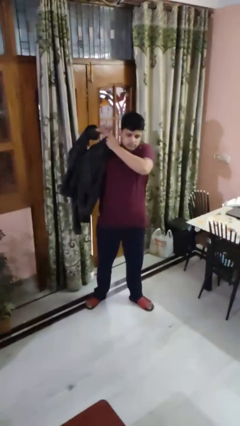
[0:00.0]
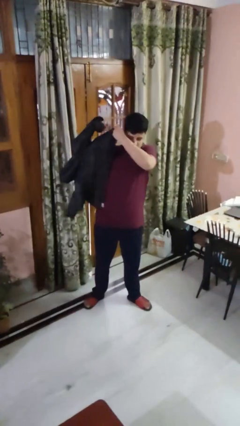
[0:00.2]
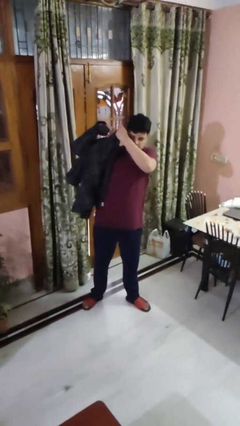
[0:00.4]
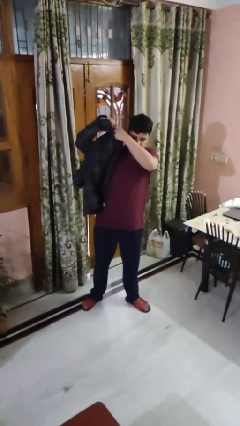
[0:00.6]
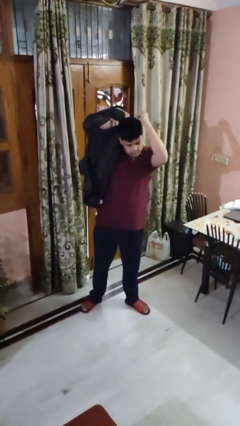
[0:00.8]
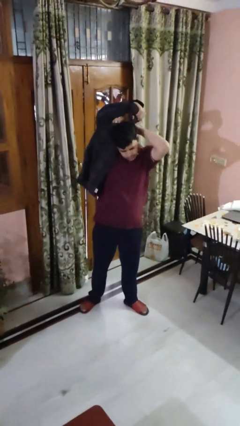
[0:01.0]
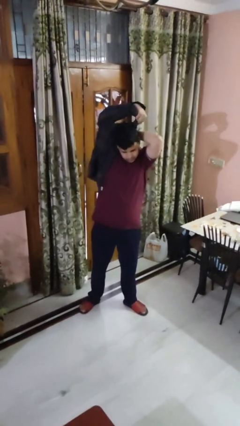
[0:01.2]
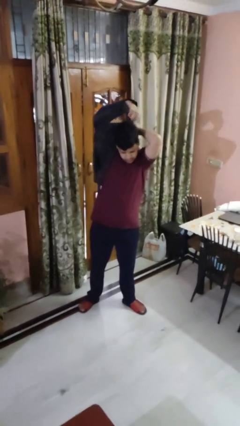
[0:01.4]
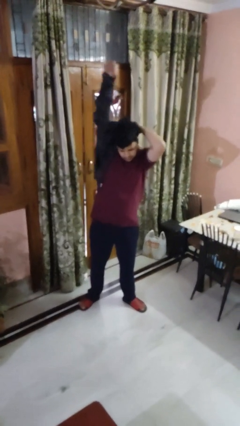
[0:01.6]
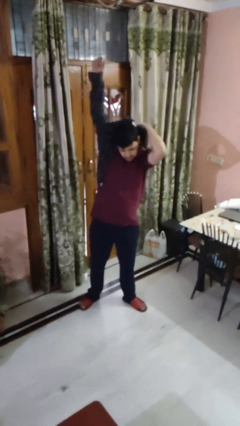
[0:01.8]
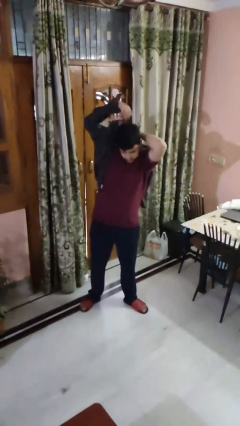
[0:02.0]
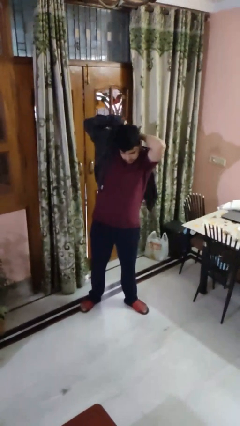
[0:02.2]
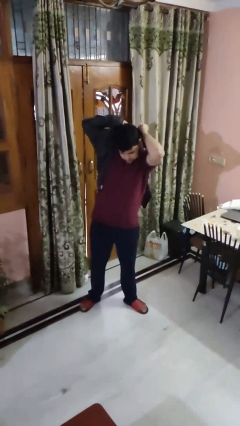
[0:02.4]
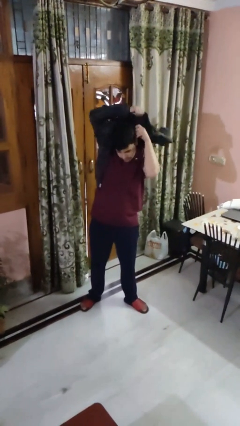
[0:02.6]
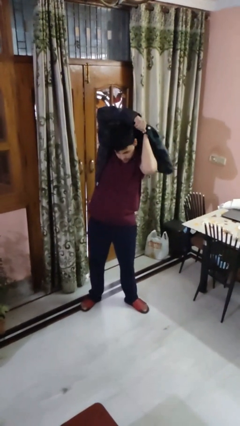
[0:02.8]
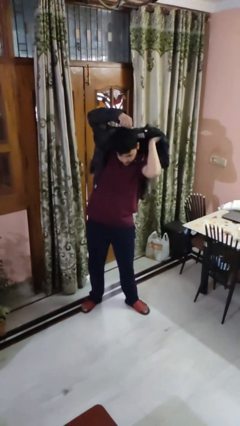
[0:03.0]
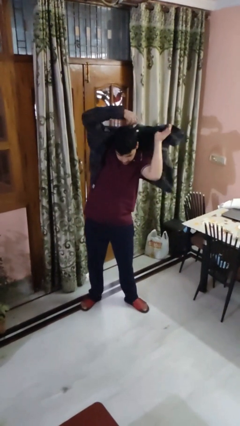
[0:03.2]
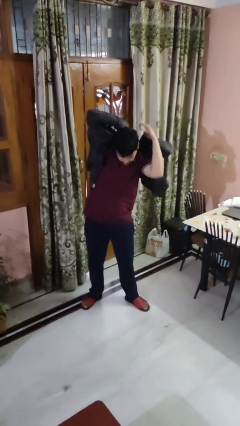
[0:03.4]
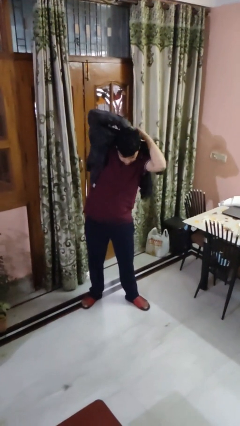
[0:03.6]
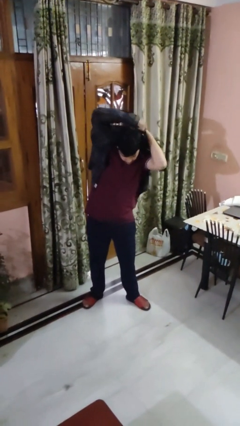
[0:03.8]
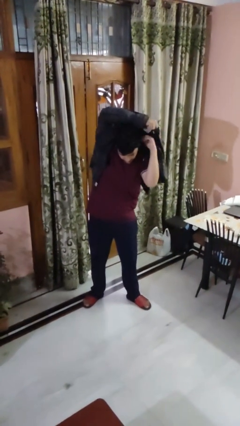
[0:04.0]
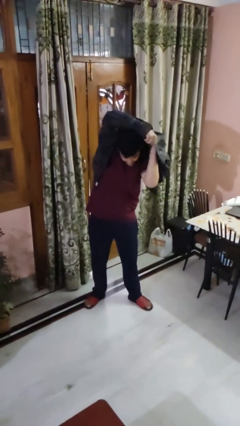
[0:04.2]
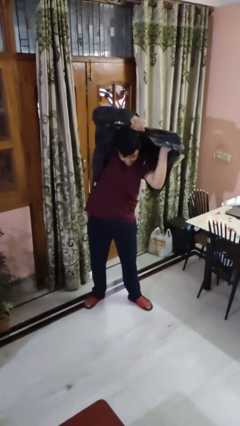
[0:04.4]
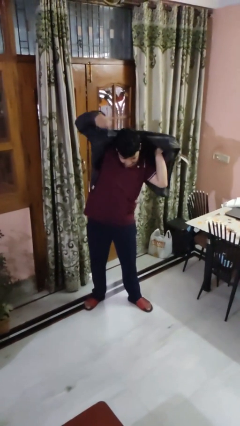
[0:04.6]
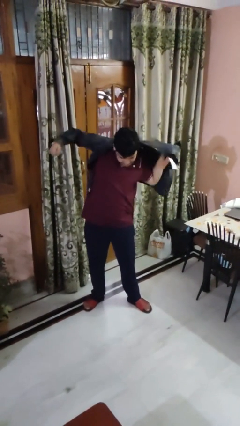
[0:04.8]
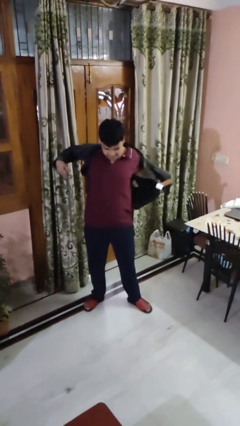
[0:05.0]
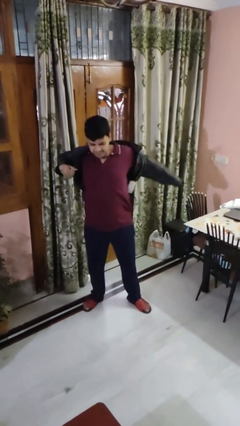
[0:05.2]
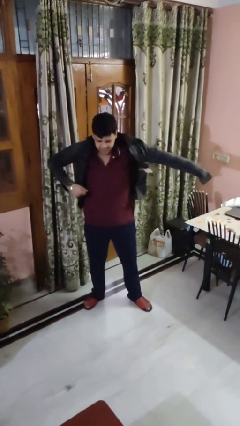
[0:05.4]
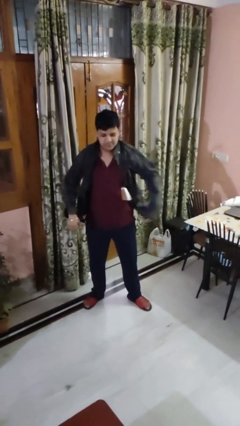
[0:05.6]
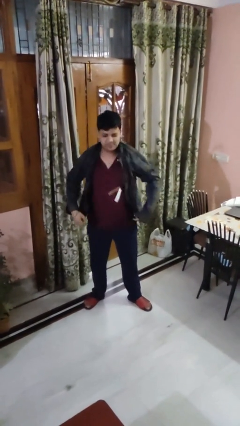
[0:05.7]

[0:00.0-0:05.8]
person puts on shirt

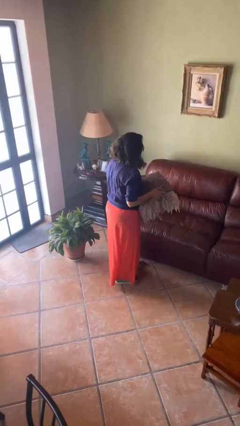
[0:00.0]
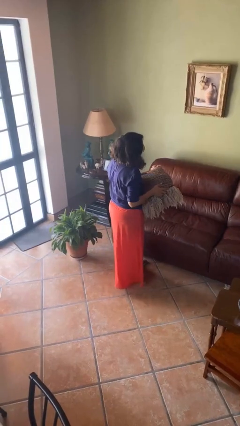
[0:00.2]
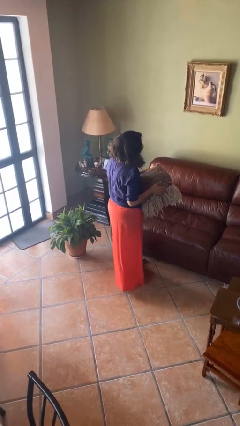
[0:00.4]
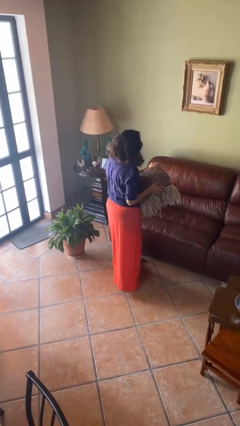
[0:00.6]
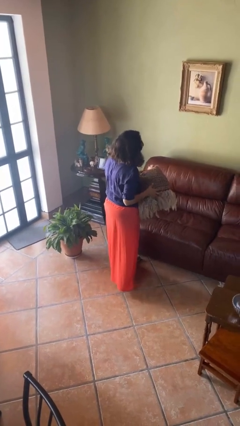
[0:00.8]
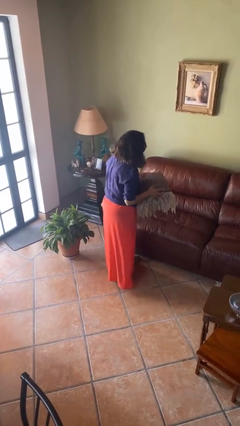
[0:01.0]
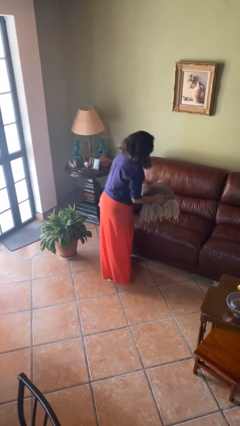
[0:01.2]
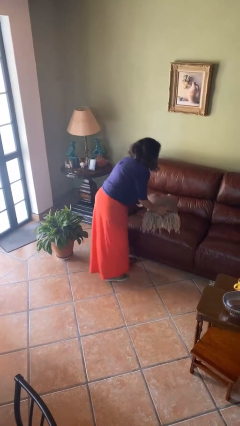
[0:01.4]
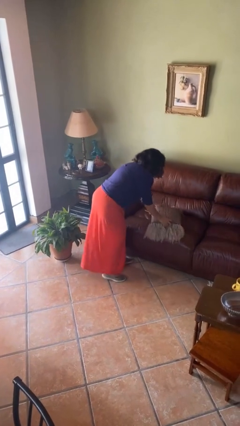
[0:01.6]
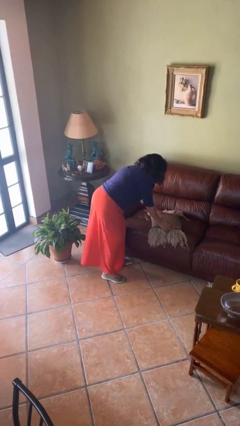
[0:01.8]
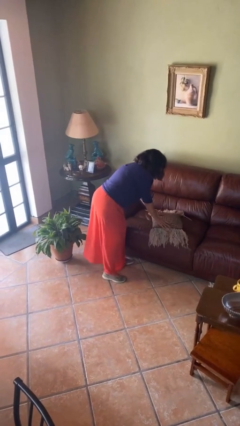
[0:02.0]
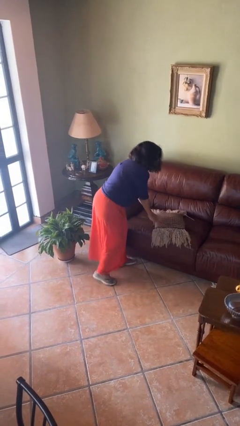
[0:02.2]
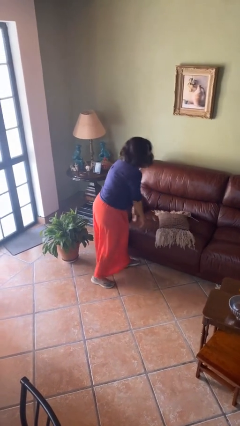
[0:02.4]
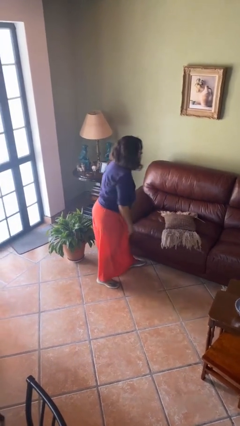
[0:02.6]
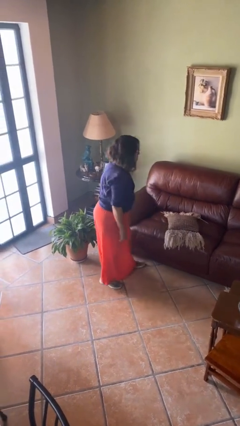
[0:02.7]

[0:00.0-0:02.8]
person puts down object on couch

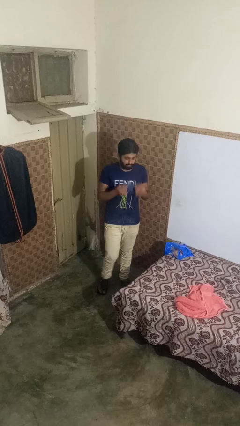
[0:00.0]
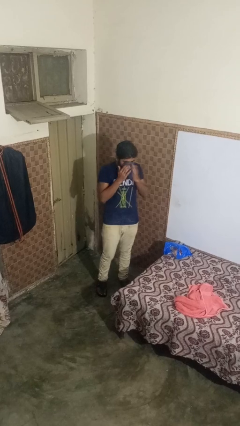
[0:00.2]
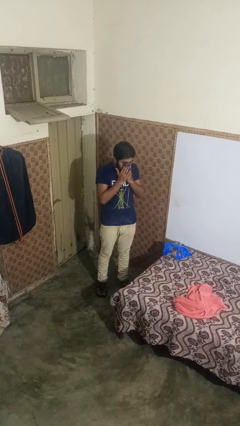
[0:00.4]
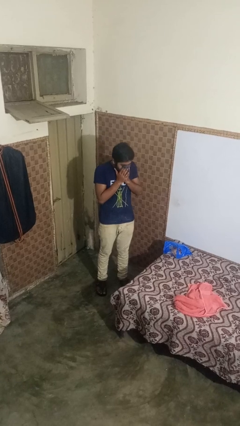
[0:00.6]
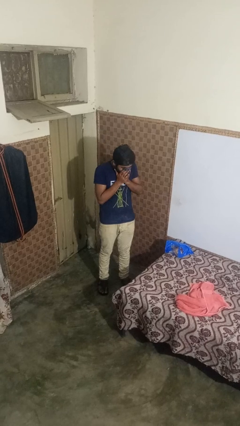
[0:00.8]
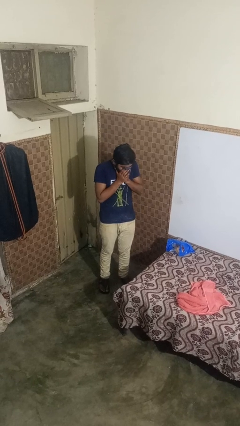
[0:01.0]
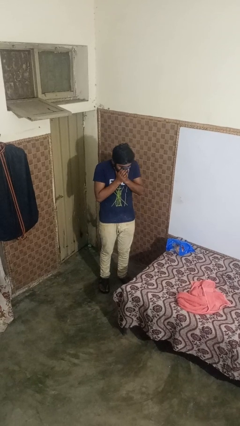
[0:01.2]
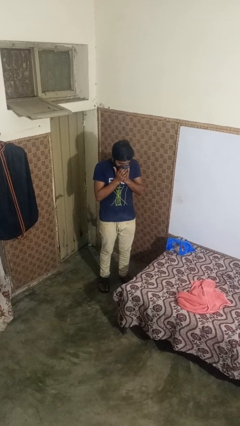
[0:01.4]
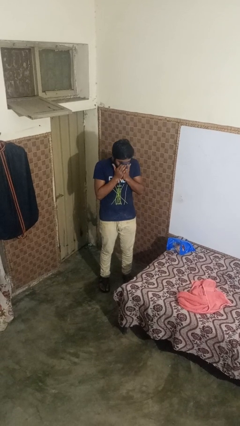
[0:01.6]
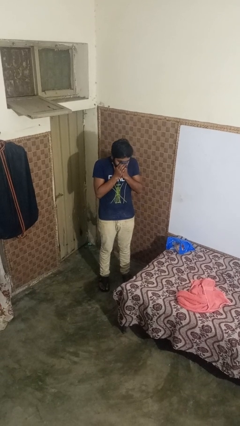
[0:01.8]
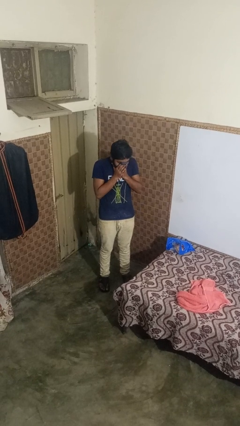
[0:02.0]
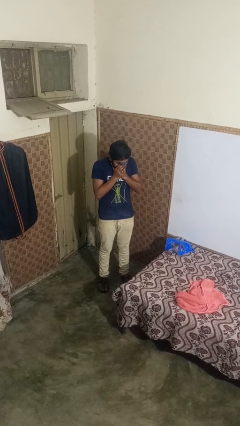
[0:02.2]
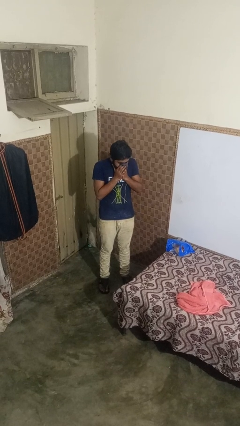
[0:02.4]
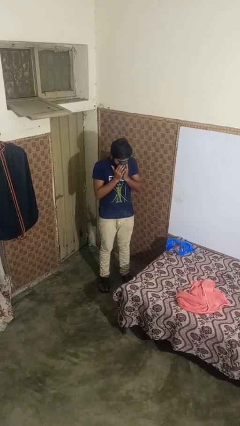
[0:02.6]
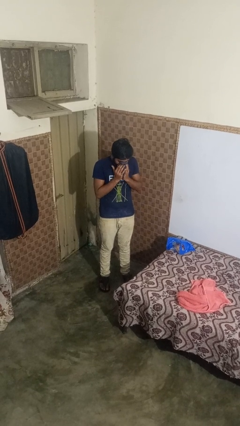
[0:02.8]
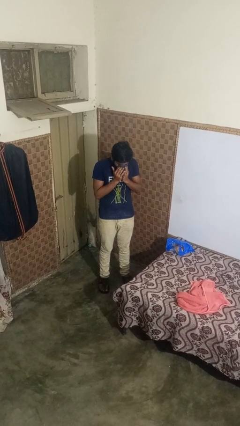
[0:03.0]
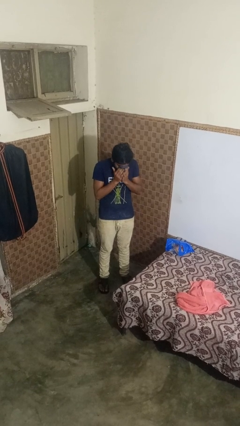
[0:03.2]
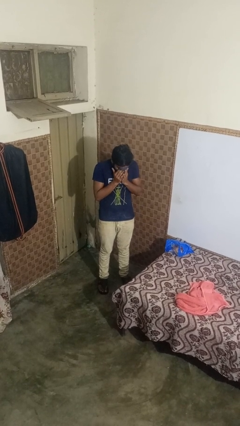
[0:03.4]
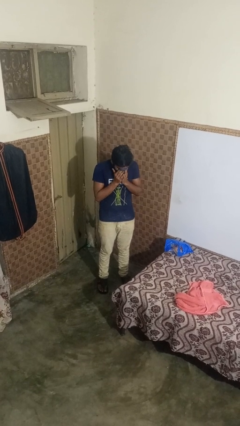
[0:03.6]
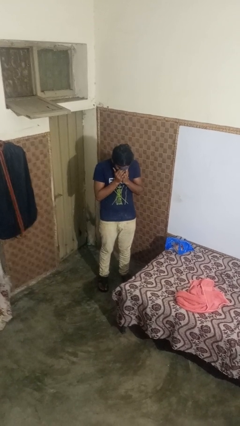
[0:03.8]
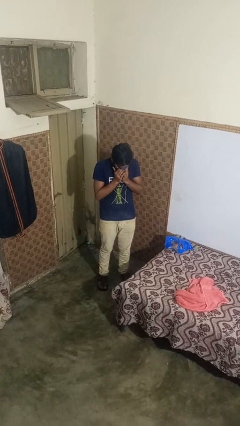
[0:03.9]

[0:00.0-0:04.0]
person blows nose

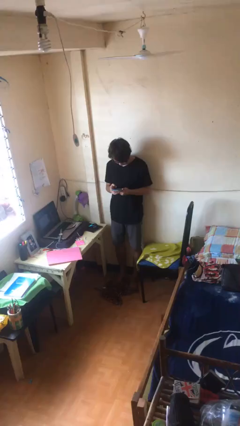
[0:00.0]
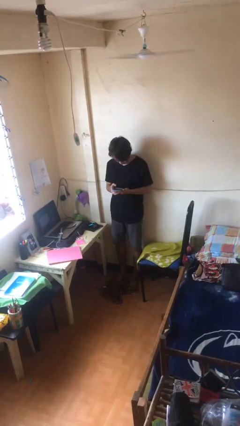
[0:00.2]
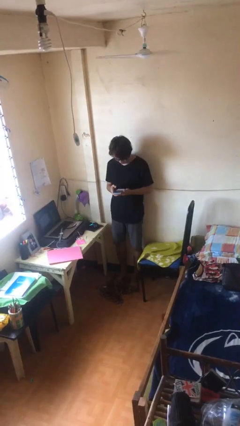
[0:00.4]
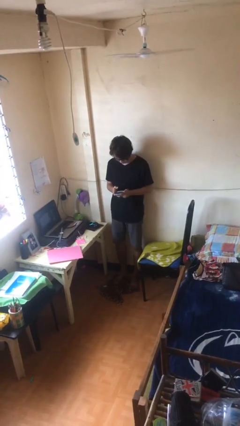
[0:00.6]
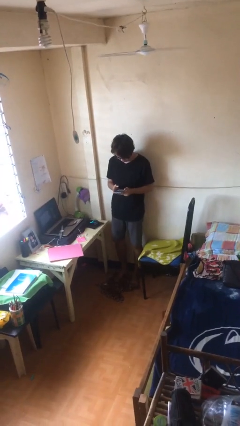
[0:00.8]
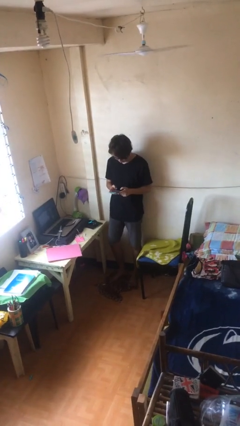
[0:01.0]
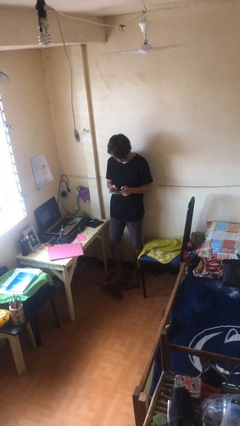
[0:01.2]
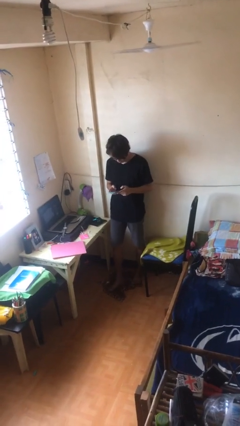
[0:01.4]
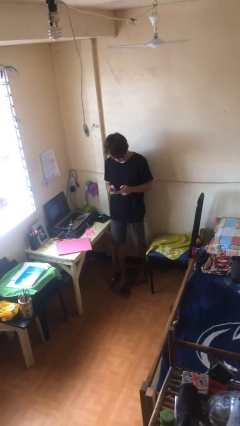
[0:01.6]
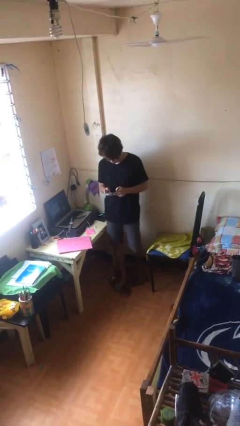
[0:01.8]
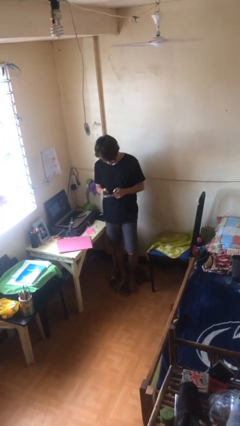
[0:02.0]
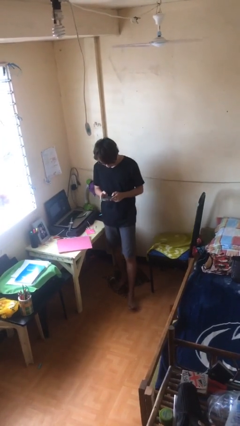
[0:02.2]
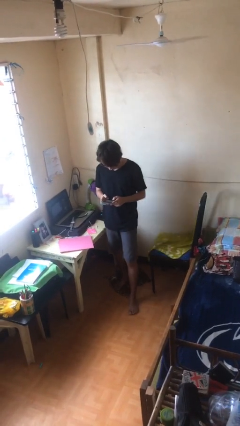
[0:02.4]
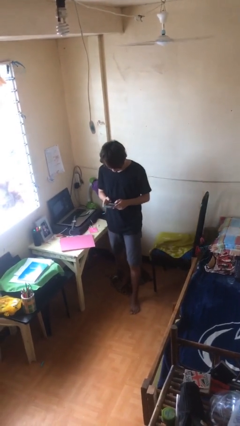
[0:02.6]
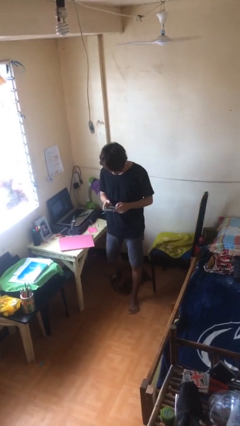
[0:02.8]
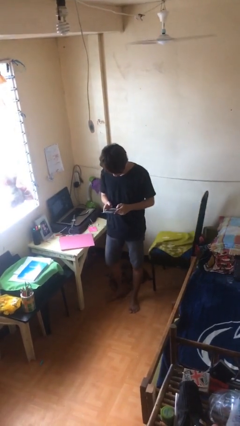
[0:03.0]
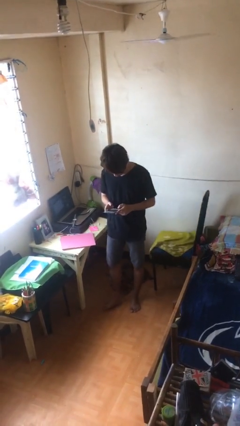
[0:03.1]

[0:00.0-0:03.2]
person texts on phone

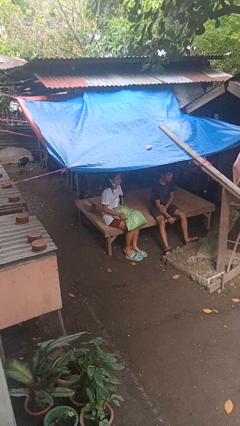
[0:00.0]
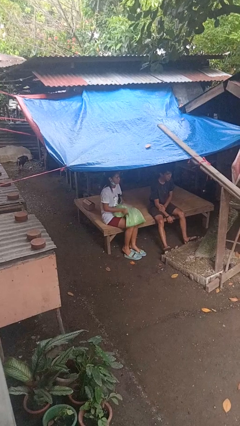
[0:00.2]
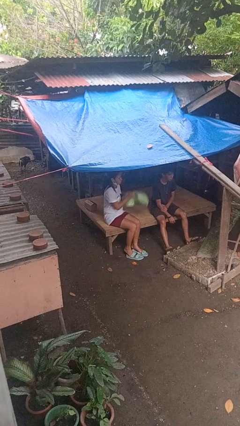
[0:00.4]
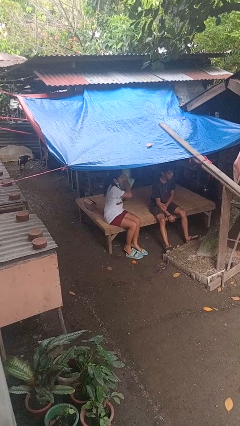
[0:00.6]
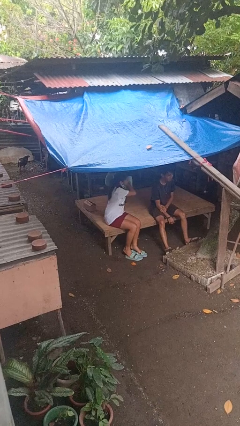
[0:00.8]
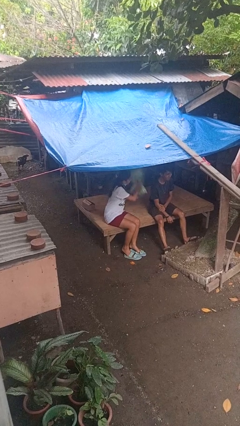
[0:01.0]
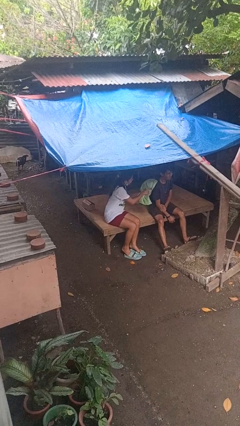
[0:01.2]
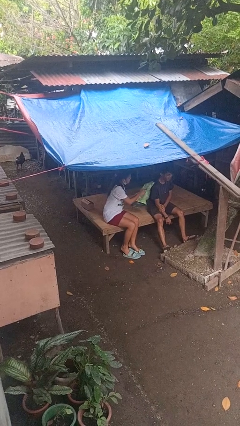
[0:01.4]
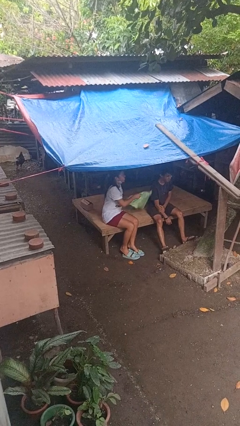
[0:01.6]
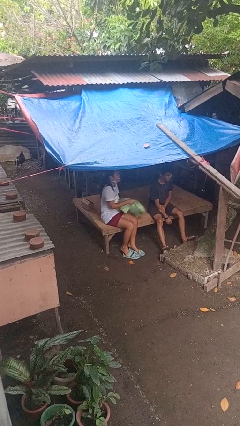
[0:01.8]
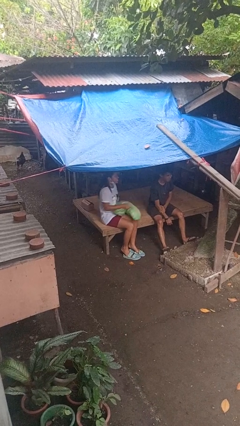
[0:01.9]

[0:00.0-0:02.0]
person hits person with pillow
